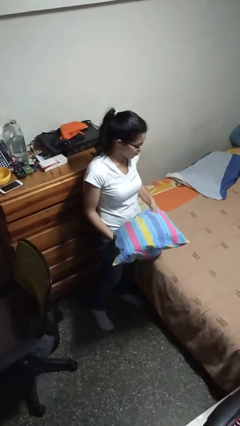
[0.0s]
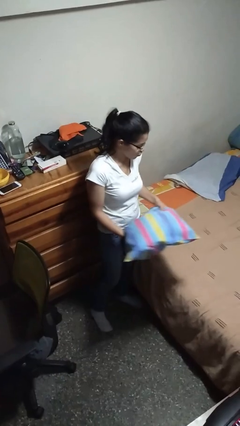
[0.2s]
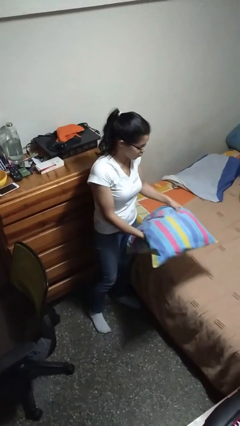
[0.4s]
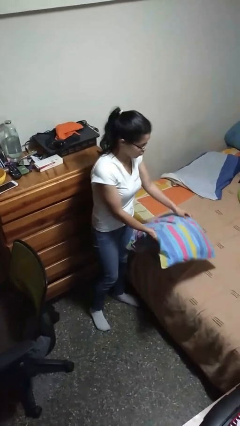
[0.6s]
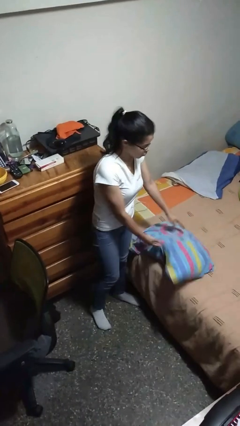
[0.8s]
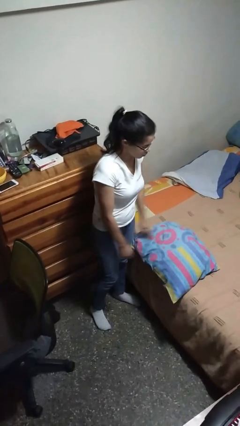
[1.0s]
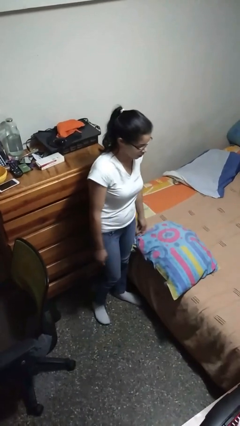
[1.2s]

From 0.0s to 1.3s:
person puts down object on bed

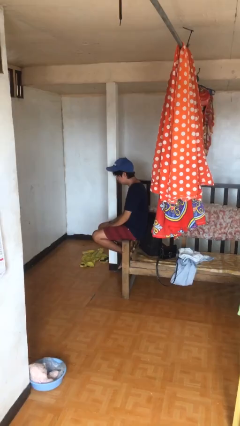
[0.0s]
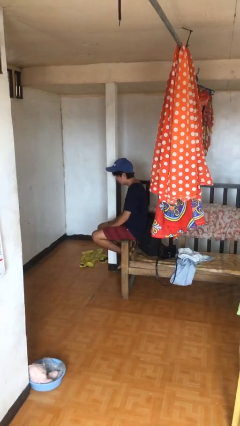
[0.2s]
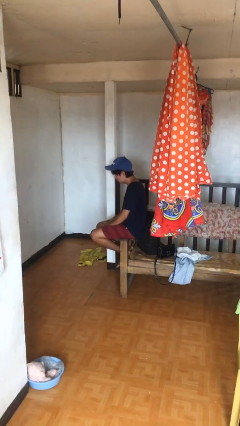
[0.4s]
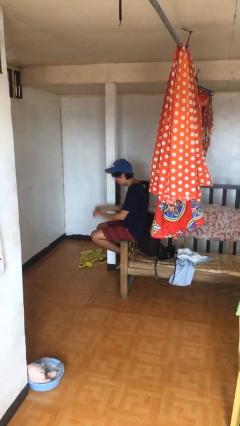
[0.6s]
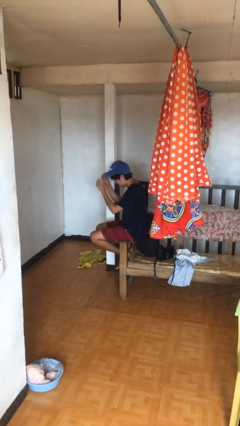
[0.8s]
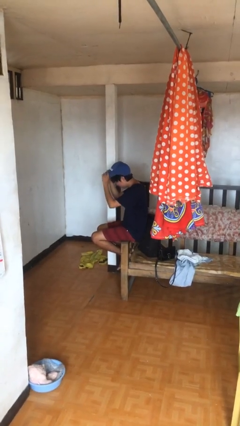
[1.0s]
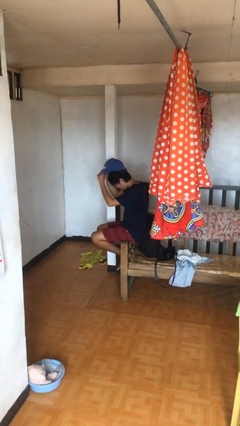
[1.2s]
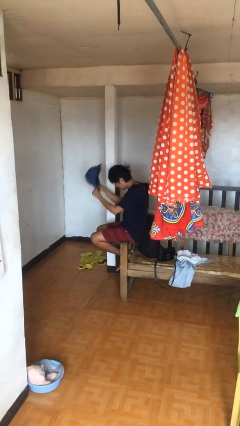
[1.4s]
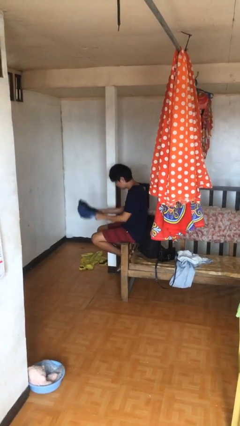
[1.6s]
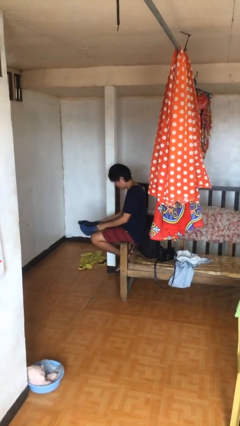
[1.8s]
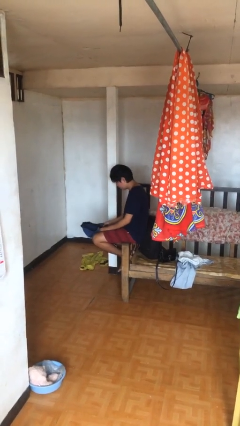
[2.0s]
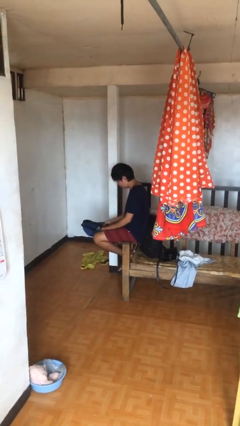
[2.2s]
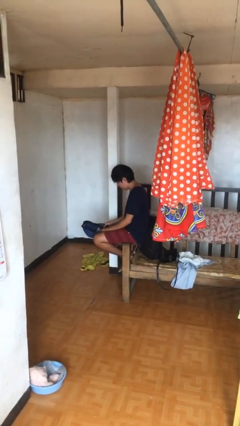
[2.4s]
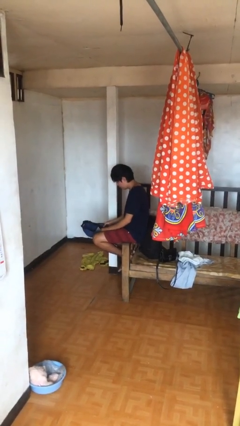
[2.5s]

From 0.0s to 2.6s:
person takes off hat

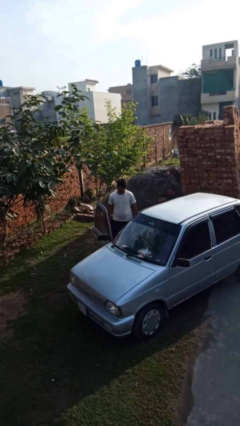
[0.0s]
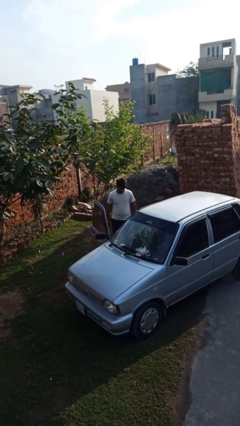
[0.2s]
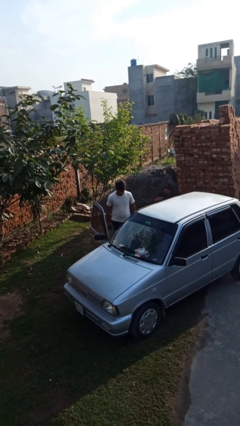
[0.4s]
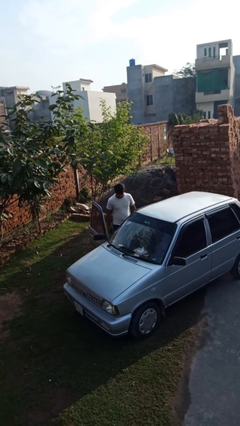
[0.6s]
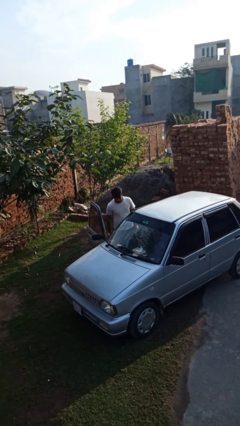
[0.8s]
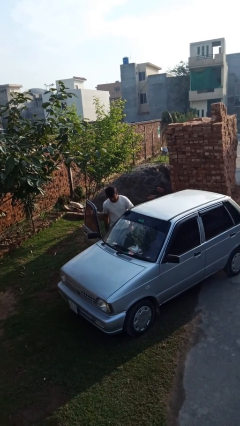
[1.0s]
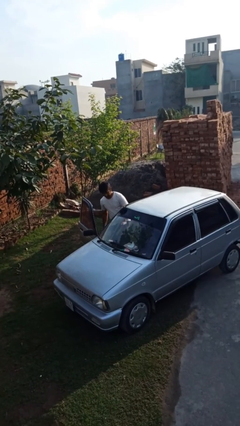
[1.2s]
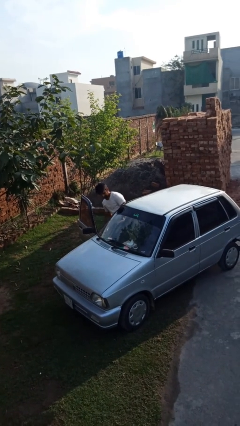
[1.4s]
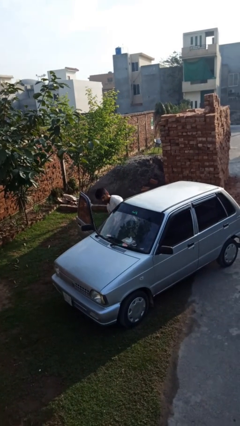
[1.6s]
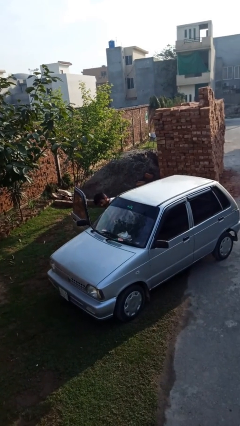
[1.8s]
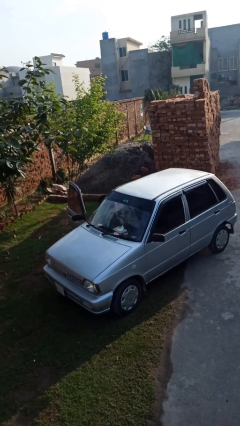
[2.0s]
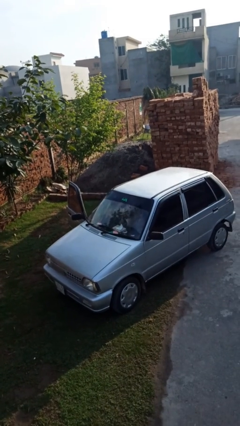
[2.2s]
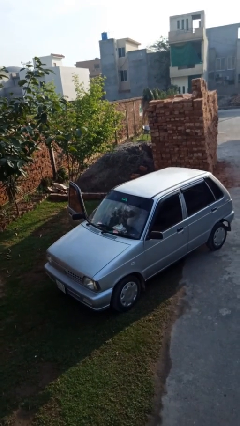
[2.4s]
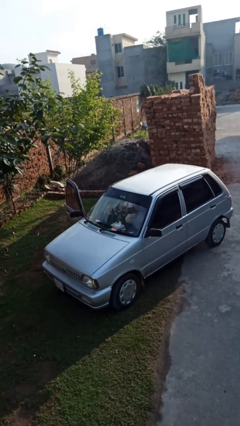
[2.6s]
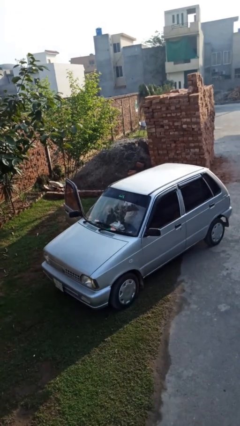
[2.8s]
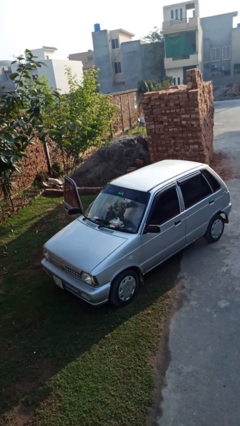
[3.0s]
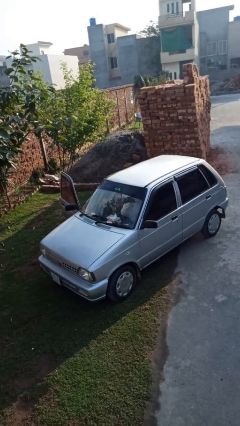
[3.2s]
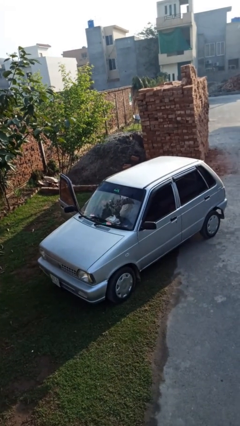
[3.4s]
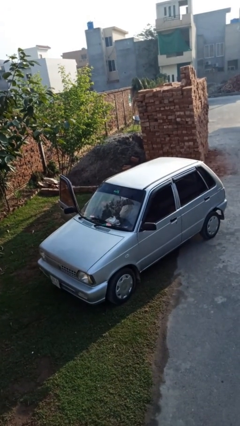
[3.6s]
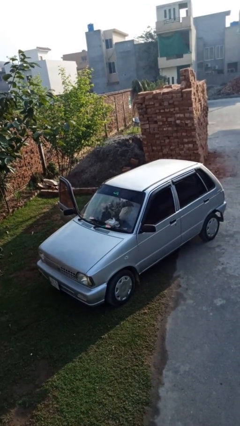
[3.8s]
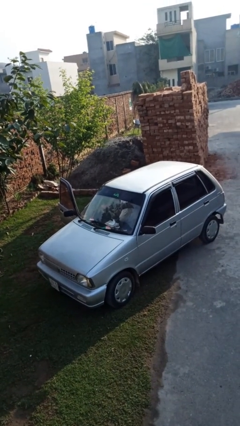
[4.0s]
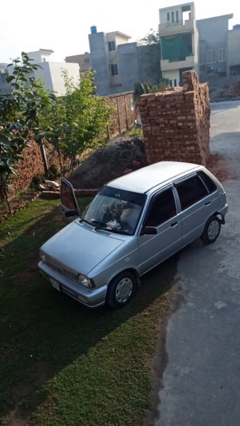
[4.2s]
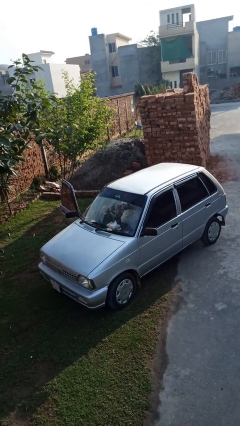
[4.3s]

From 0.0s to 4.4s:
person enters car

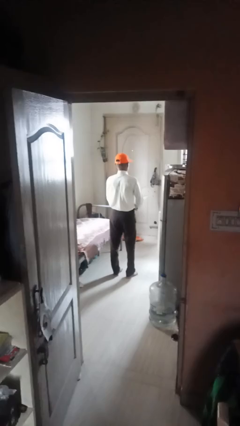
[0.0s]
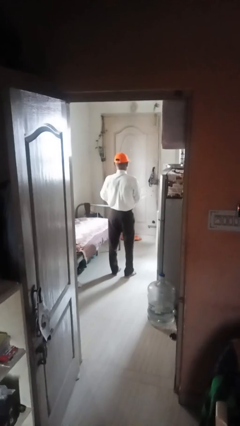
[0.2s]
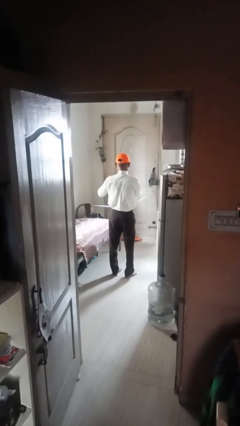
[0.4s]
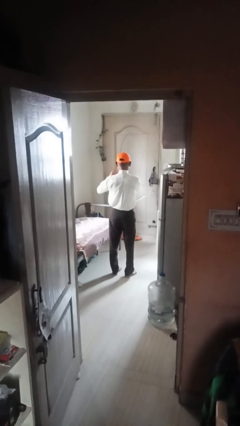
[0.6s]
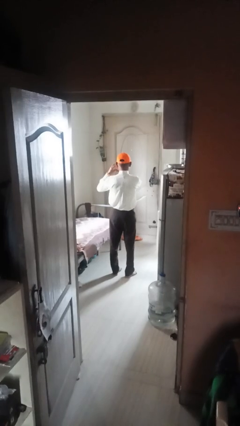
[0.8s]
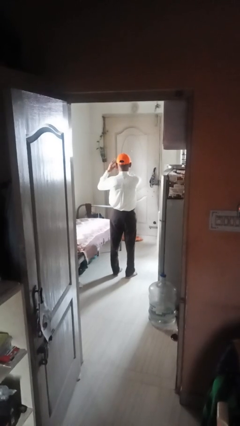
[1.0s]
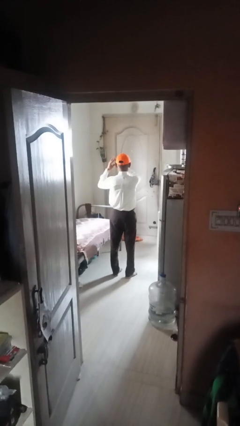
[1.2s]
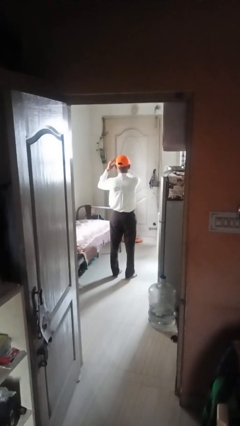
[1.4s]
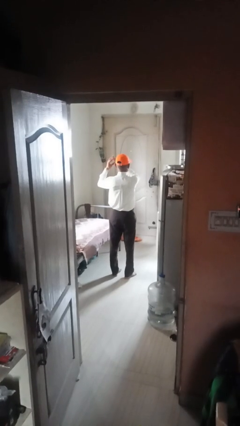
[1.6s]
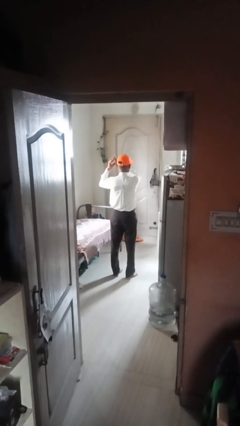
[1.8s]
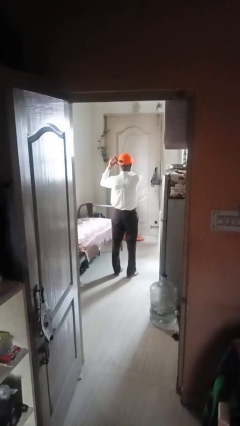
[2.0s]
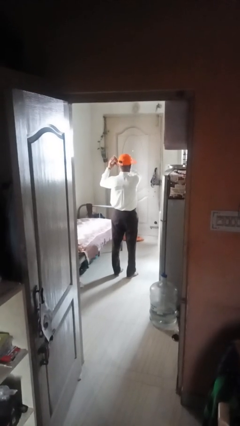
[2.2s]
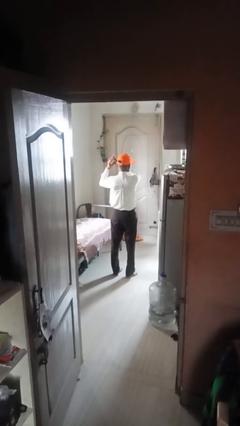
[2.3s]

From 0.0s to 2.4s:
person gestures heart

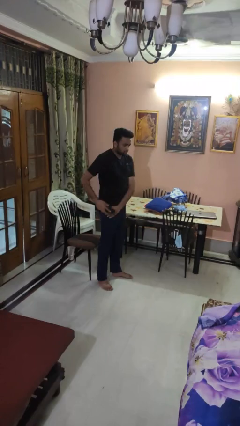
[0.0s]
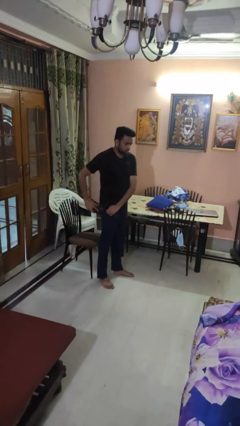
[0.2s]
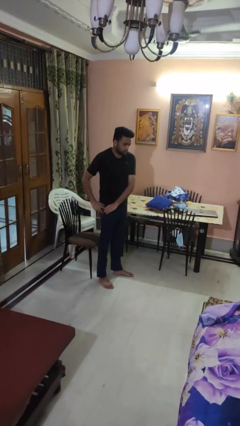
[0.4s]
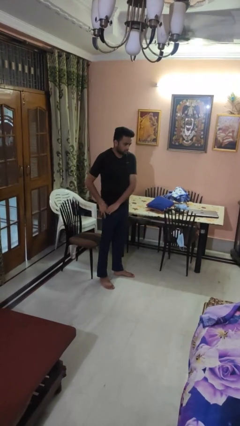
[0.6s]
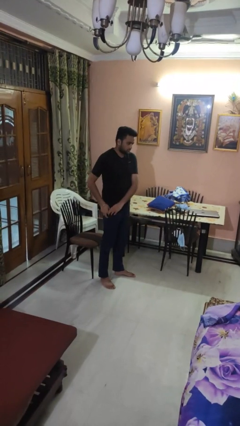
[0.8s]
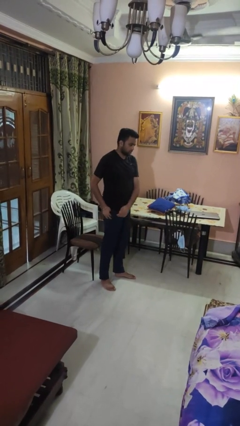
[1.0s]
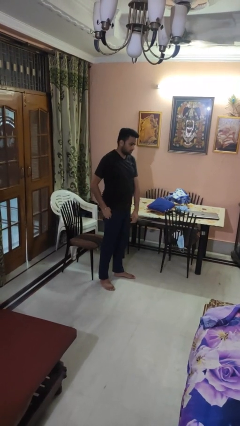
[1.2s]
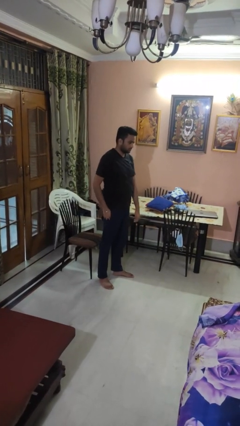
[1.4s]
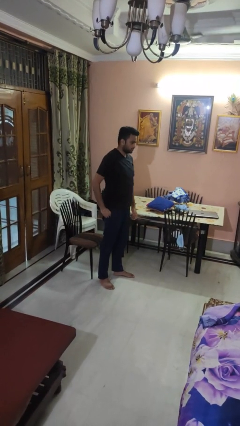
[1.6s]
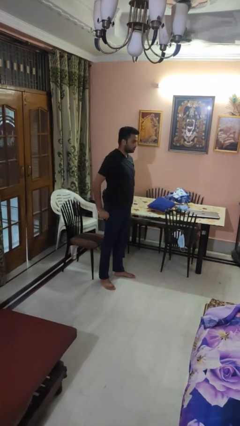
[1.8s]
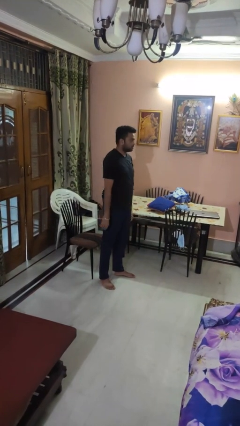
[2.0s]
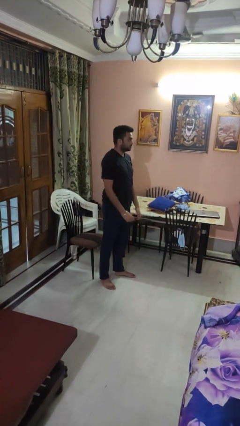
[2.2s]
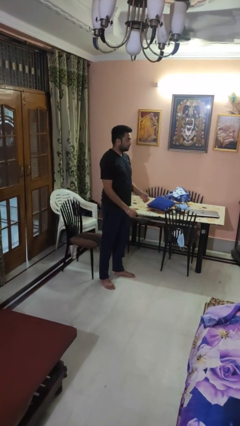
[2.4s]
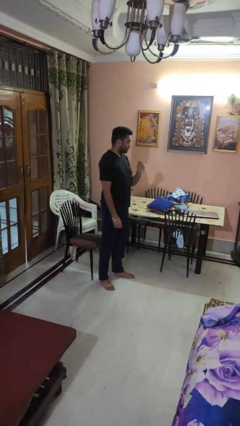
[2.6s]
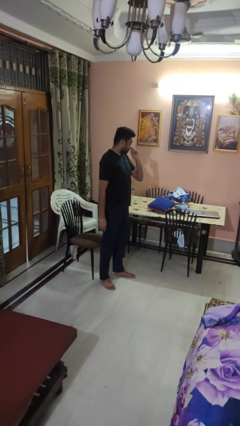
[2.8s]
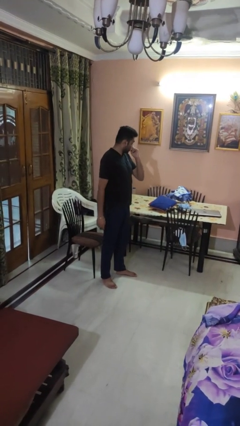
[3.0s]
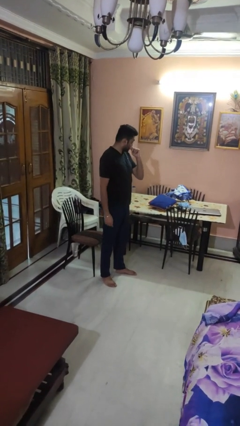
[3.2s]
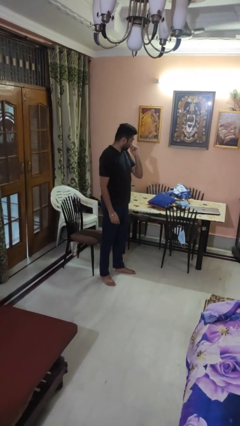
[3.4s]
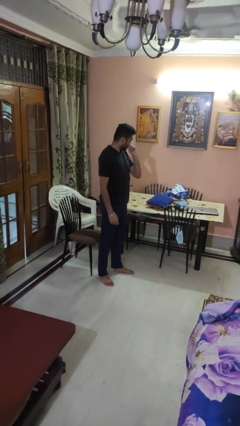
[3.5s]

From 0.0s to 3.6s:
person puts phone into pocket

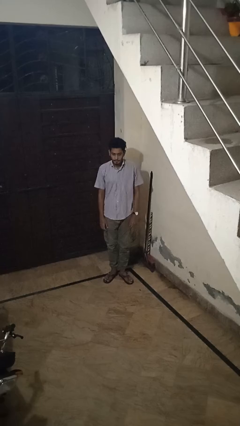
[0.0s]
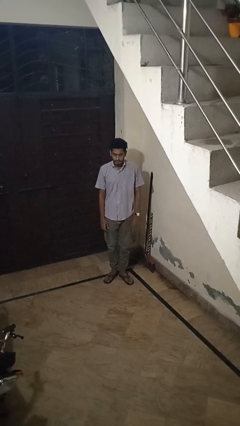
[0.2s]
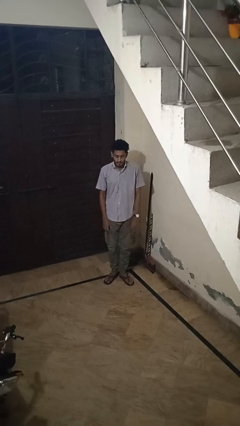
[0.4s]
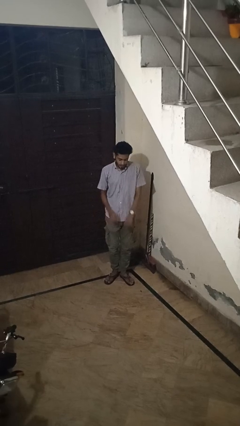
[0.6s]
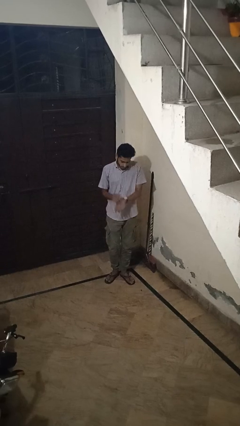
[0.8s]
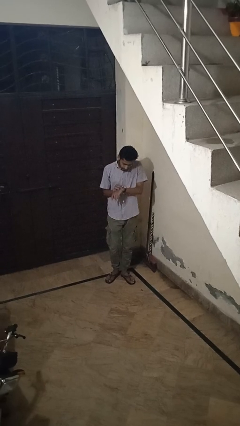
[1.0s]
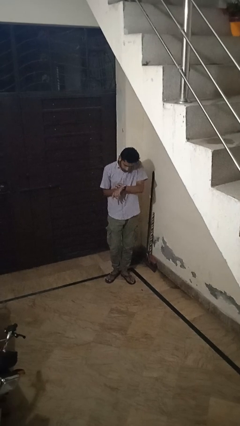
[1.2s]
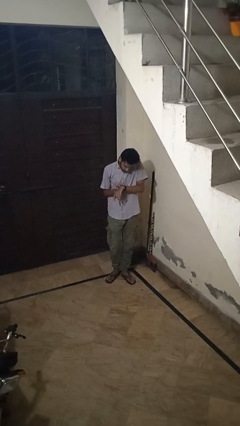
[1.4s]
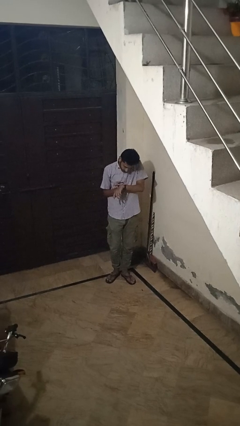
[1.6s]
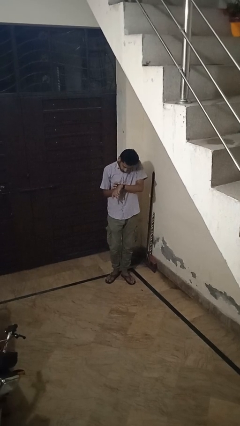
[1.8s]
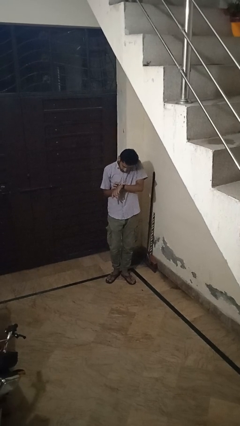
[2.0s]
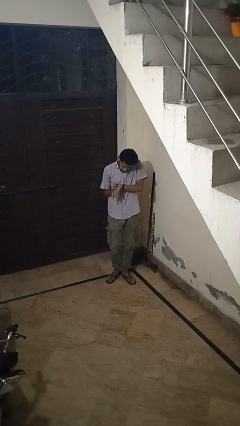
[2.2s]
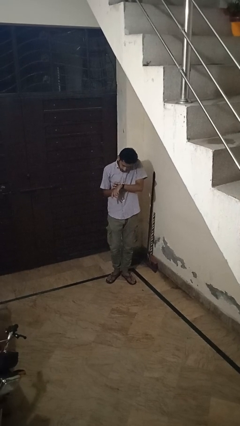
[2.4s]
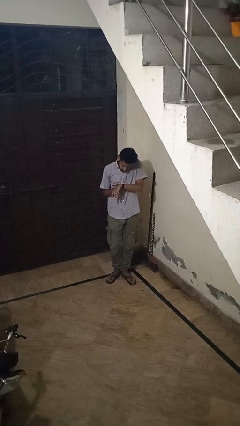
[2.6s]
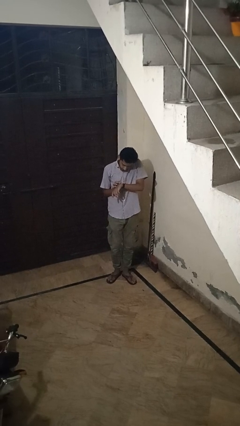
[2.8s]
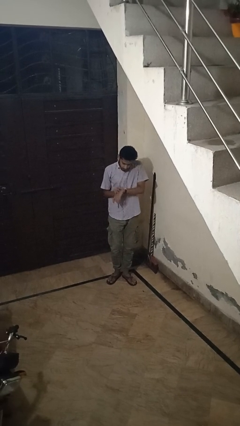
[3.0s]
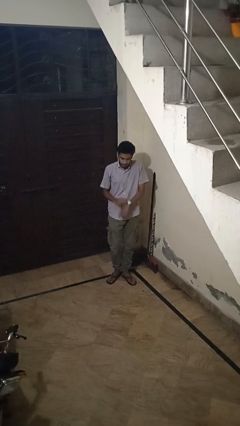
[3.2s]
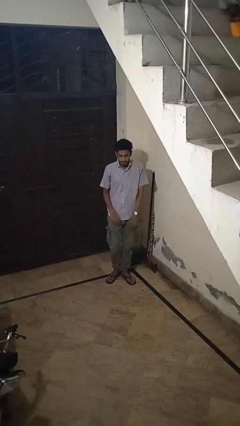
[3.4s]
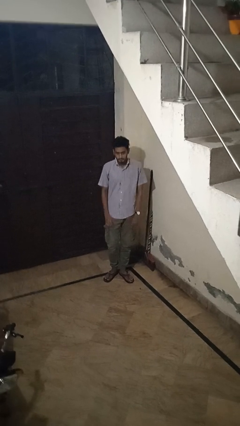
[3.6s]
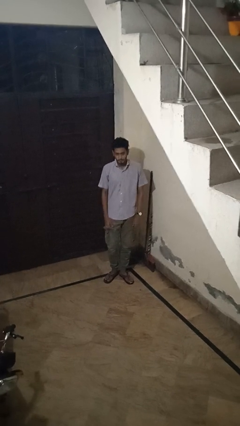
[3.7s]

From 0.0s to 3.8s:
person looks at wristwatch
